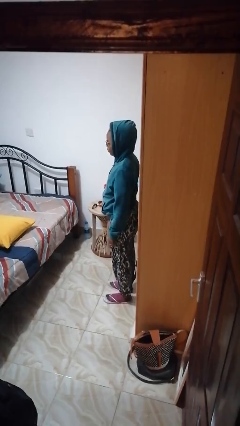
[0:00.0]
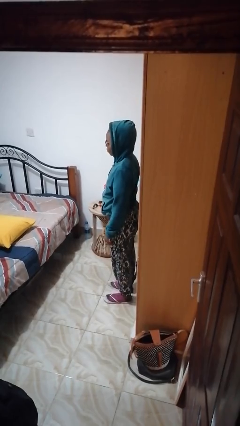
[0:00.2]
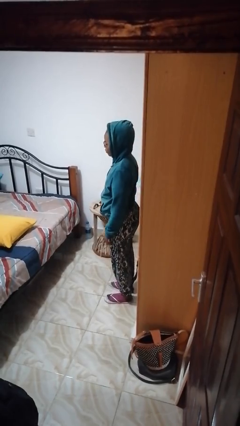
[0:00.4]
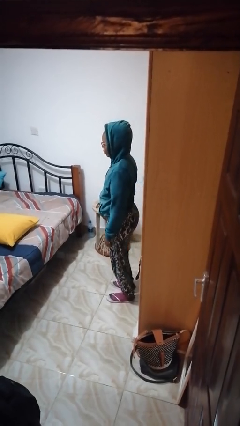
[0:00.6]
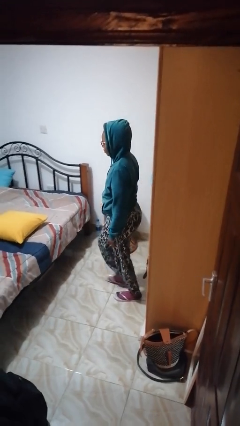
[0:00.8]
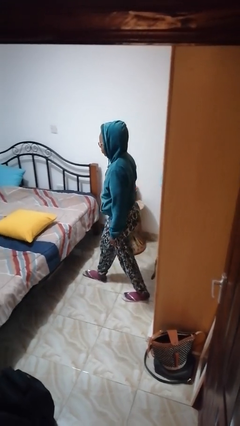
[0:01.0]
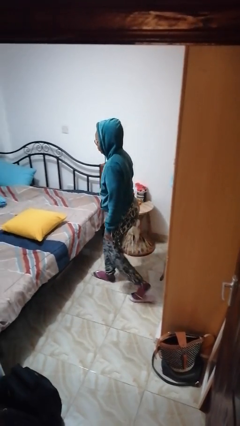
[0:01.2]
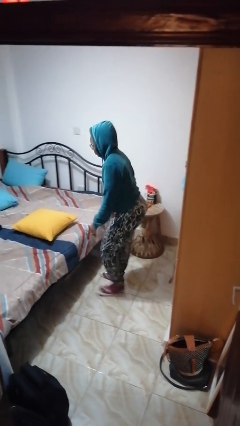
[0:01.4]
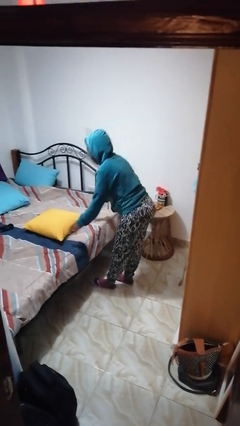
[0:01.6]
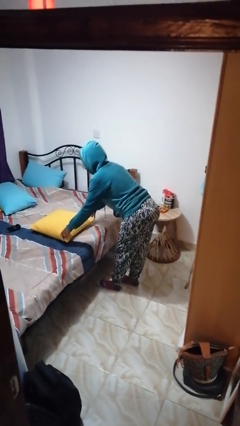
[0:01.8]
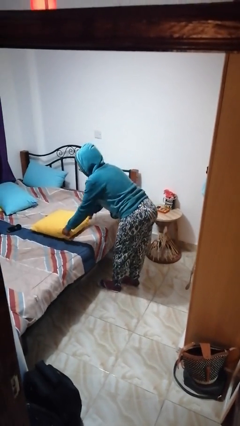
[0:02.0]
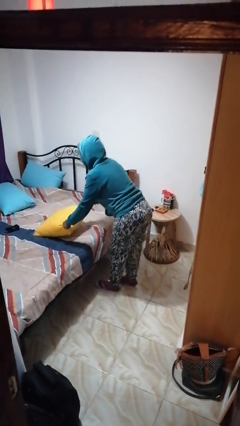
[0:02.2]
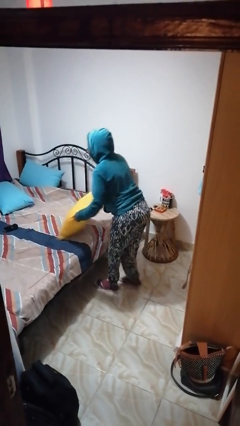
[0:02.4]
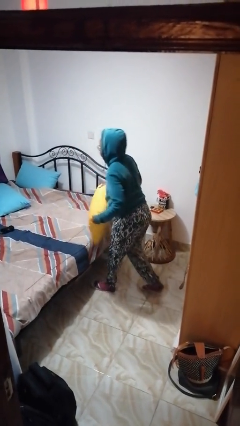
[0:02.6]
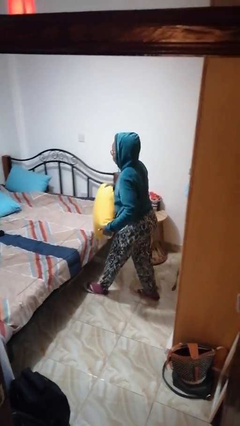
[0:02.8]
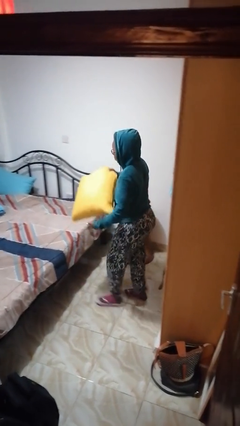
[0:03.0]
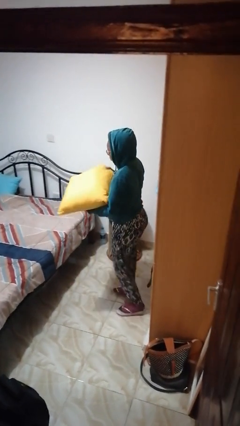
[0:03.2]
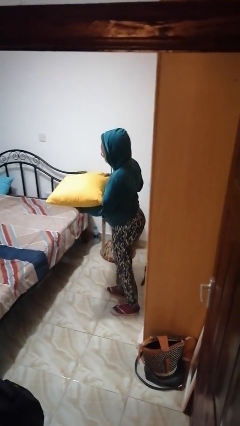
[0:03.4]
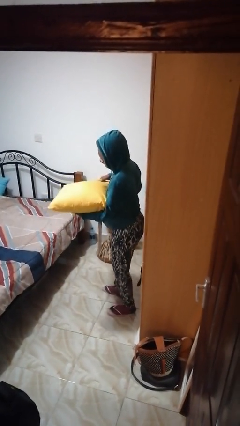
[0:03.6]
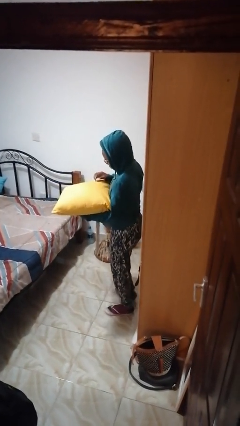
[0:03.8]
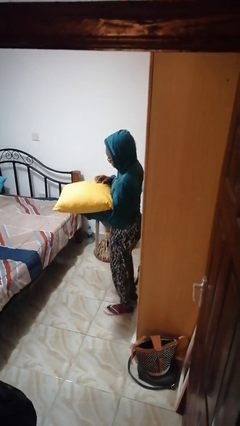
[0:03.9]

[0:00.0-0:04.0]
person picks up object from bed

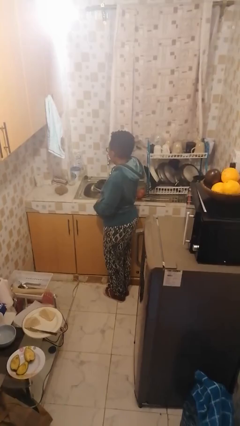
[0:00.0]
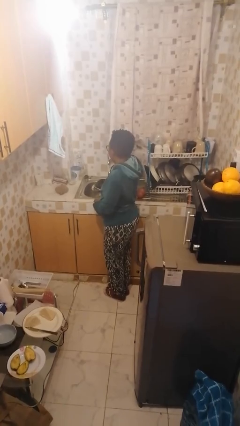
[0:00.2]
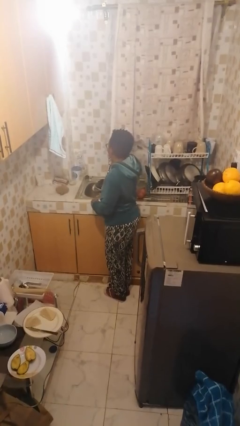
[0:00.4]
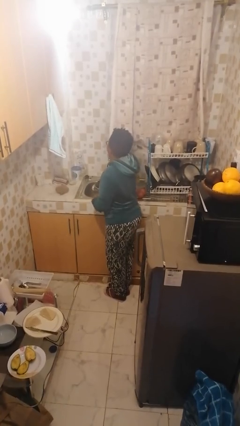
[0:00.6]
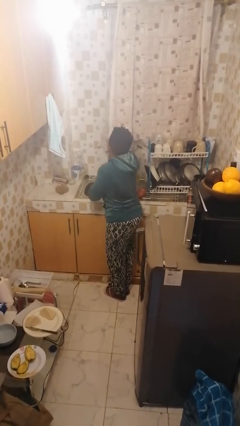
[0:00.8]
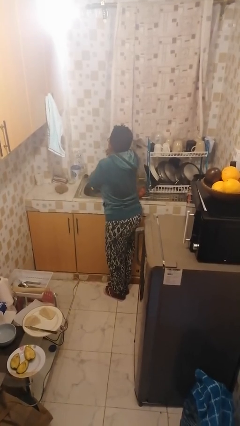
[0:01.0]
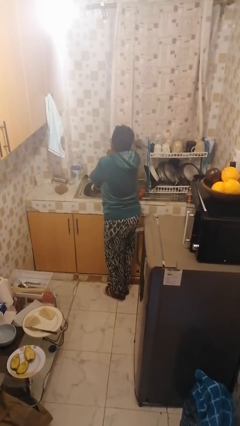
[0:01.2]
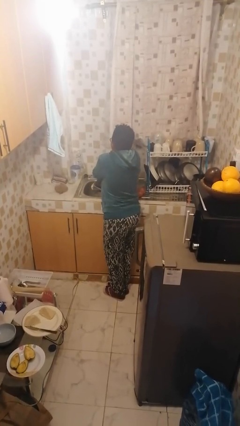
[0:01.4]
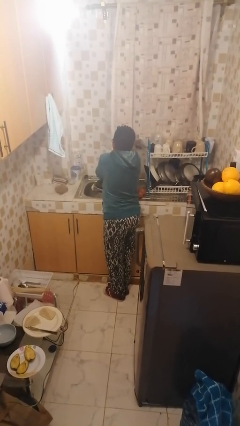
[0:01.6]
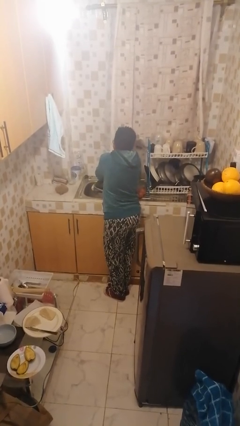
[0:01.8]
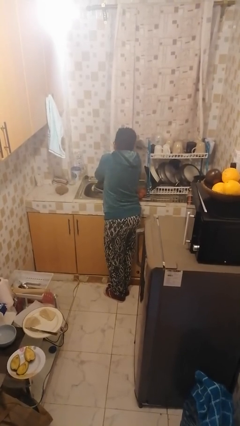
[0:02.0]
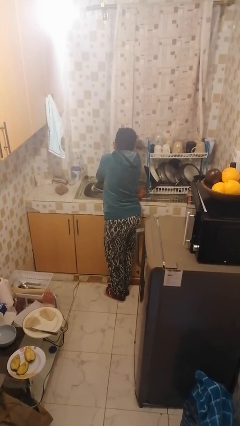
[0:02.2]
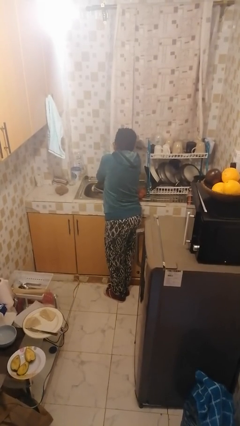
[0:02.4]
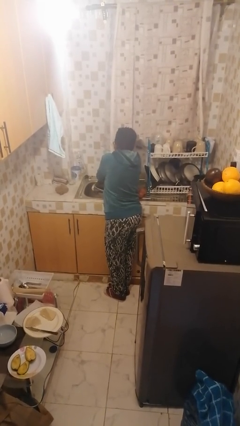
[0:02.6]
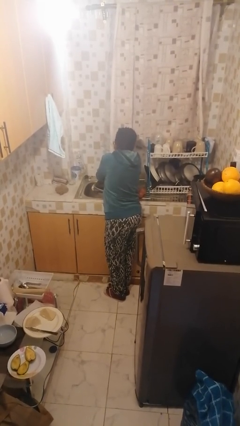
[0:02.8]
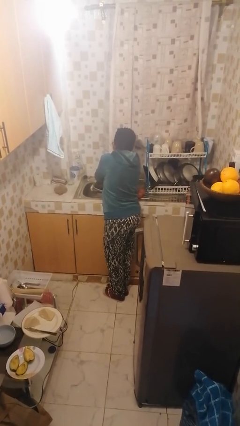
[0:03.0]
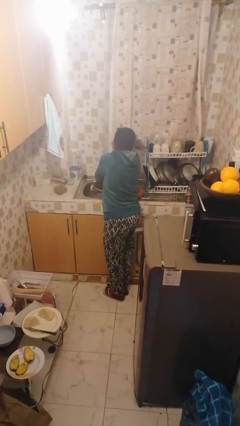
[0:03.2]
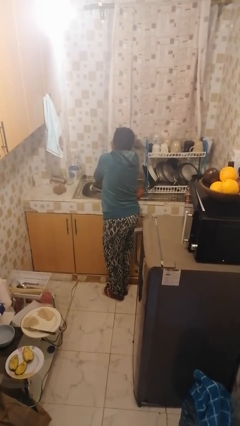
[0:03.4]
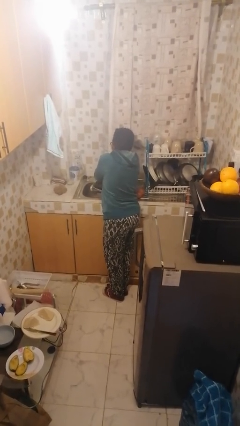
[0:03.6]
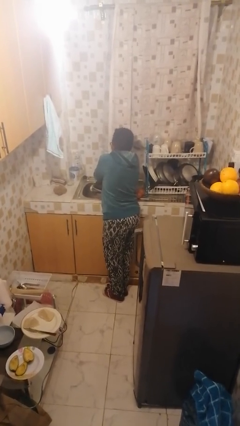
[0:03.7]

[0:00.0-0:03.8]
person washes hands

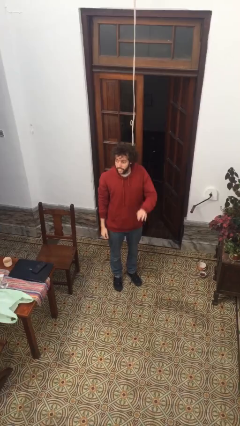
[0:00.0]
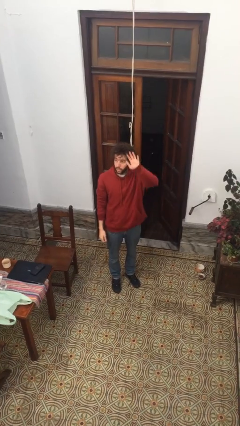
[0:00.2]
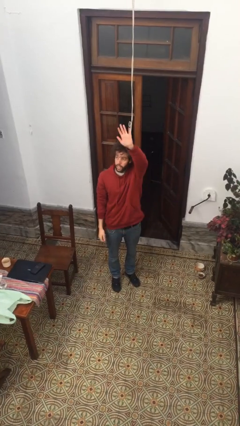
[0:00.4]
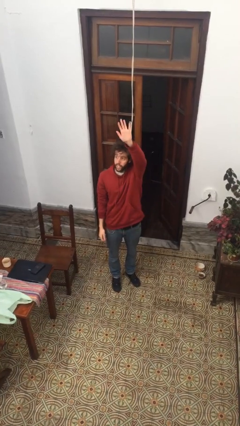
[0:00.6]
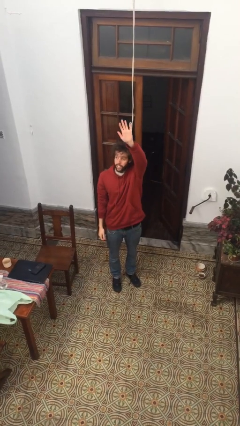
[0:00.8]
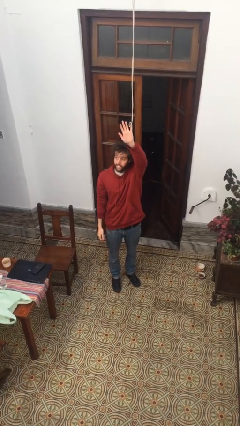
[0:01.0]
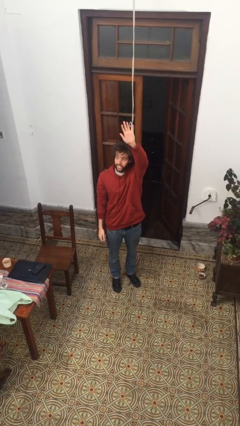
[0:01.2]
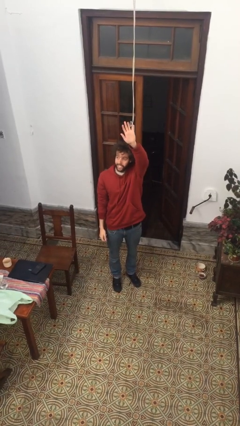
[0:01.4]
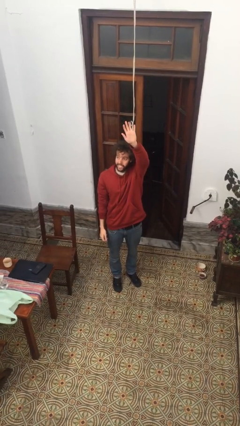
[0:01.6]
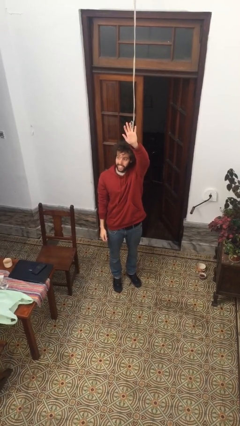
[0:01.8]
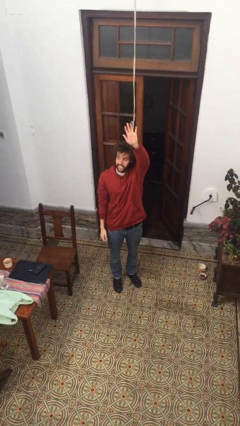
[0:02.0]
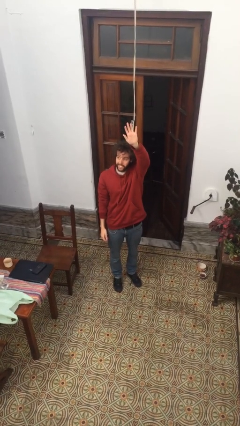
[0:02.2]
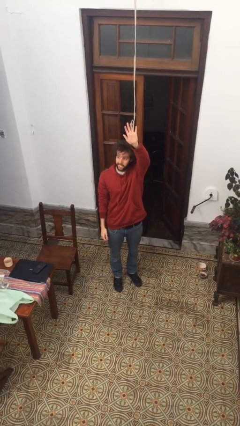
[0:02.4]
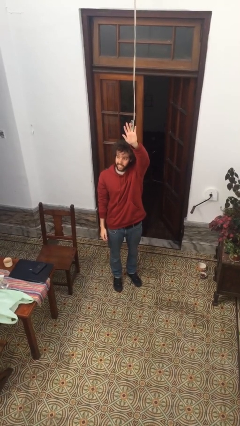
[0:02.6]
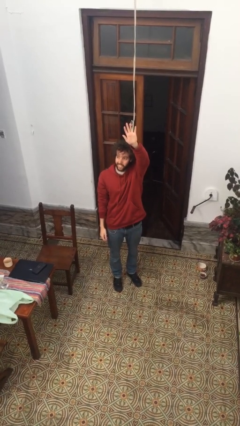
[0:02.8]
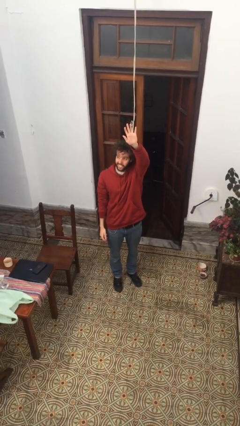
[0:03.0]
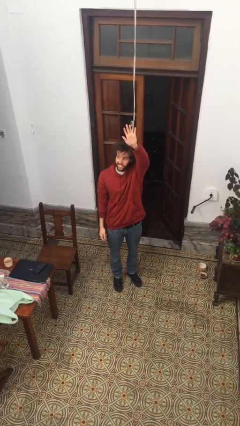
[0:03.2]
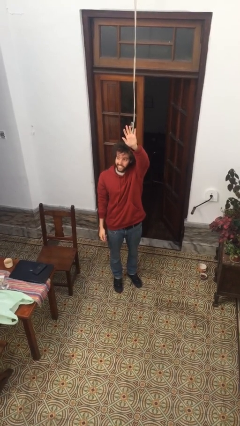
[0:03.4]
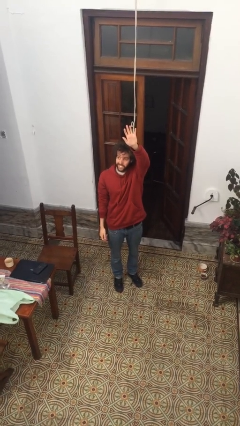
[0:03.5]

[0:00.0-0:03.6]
person gestures raise hand

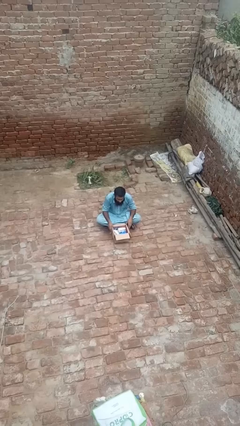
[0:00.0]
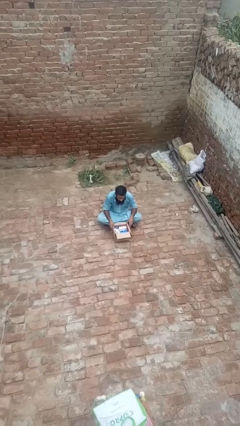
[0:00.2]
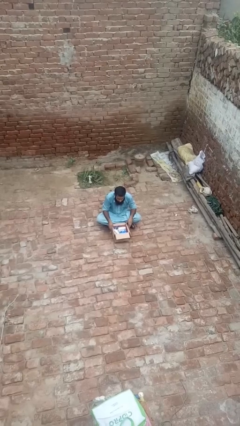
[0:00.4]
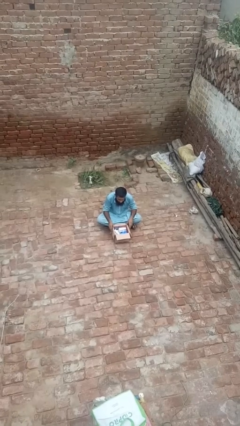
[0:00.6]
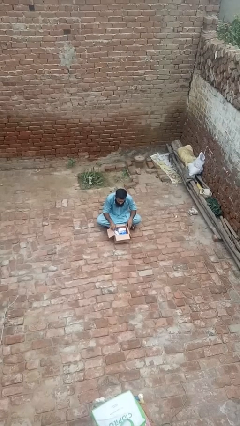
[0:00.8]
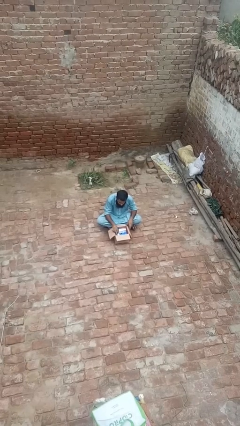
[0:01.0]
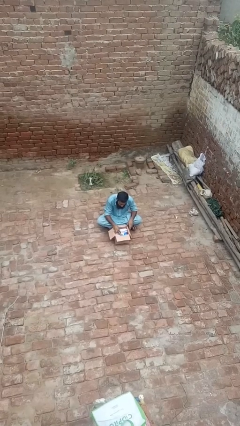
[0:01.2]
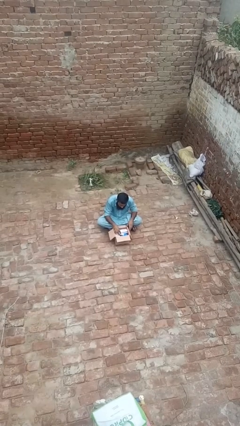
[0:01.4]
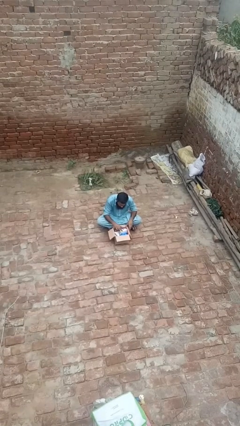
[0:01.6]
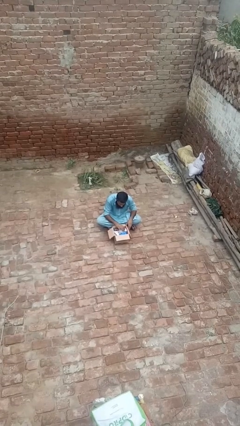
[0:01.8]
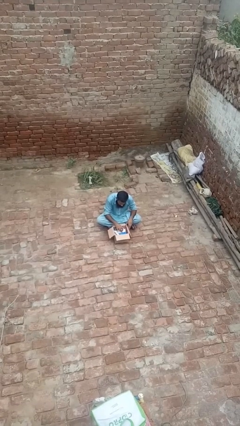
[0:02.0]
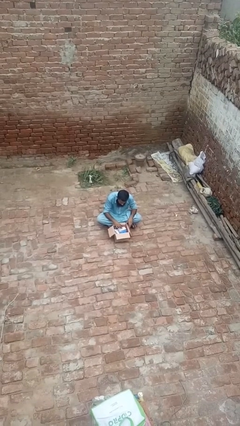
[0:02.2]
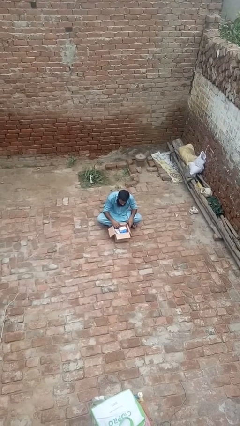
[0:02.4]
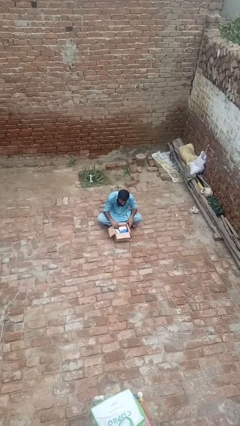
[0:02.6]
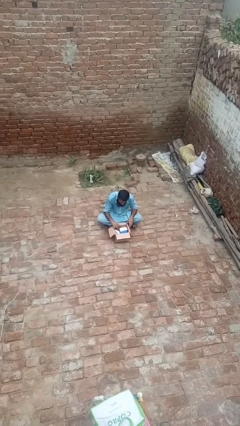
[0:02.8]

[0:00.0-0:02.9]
person searches in box

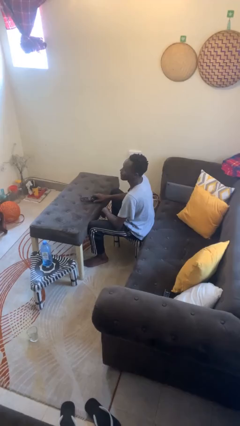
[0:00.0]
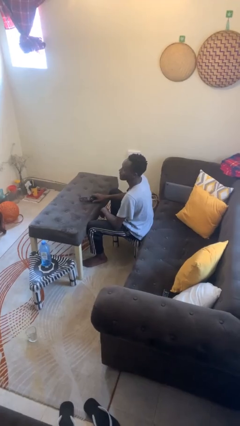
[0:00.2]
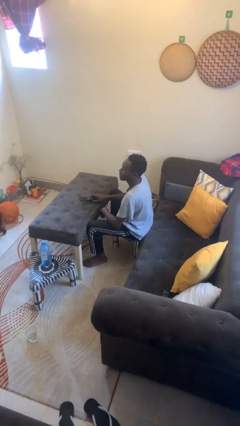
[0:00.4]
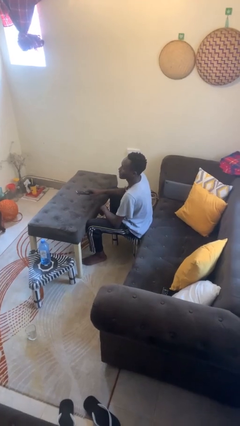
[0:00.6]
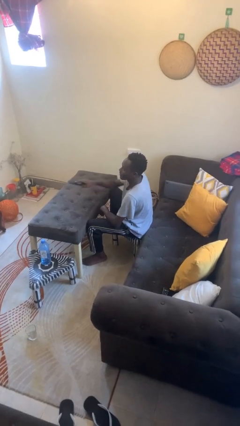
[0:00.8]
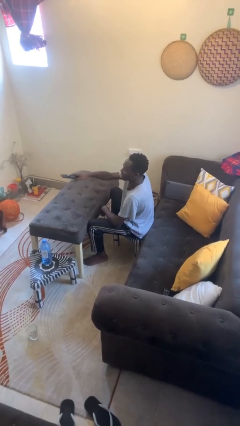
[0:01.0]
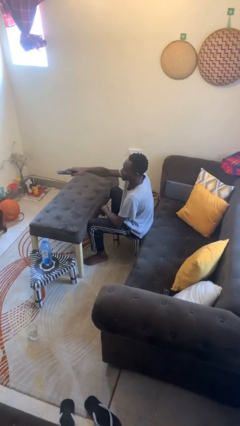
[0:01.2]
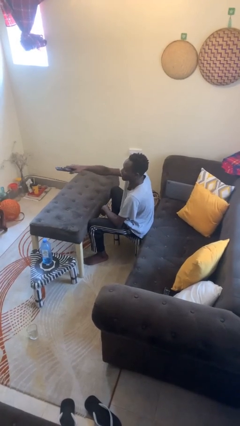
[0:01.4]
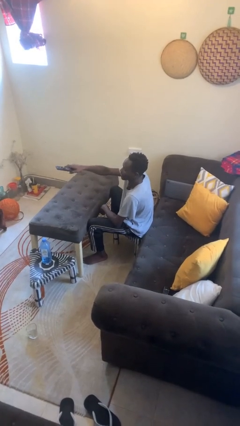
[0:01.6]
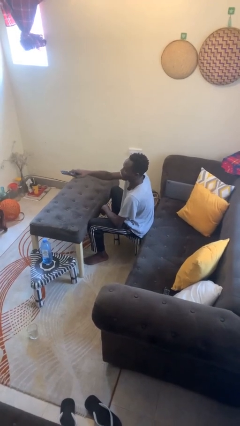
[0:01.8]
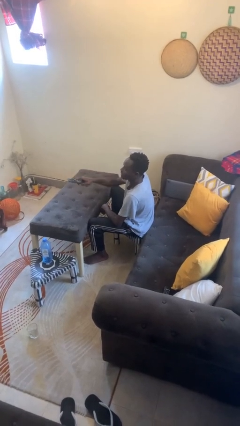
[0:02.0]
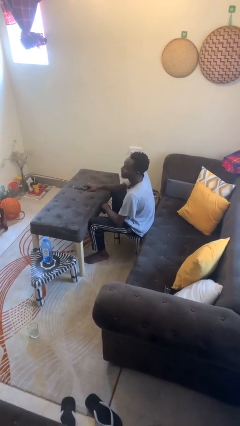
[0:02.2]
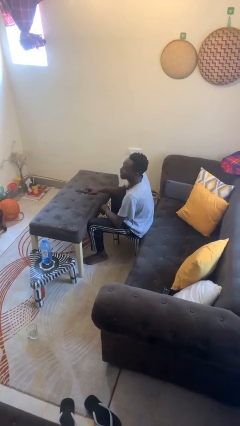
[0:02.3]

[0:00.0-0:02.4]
person uses television remote

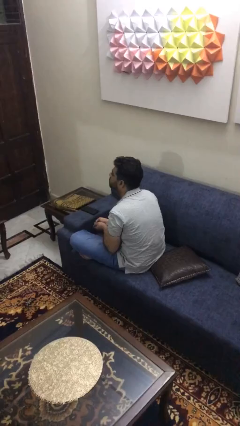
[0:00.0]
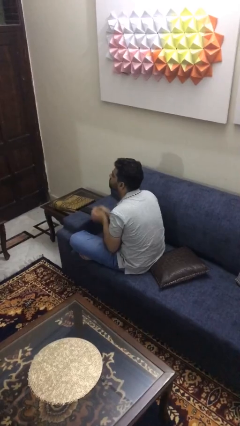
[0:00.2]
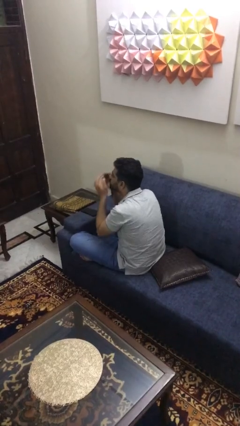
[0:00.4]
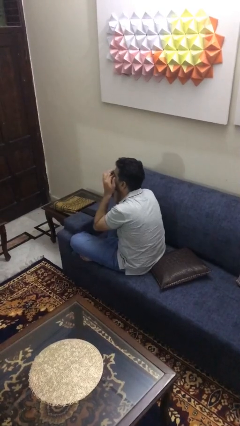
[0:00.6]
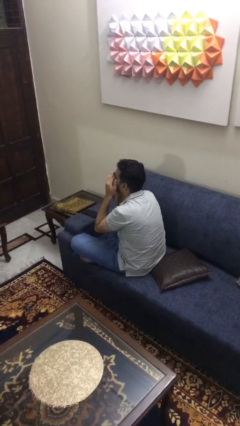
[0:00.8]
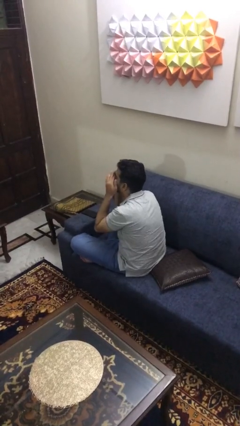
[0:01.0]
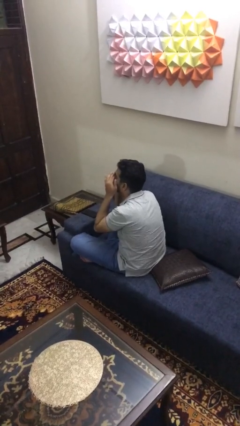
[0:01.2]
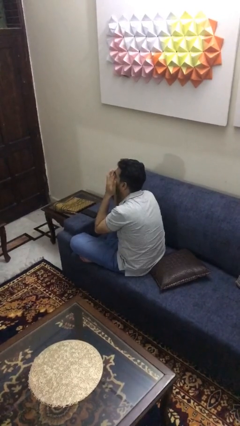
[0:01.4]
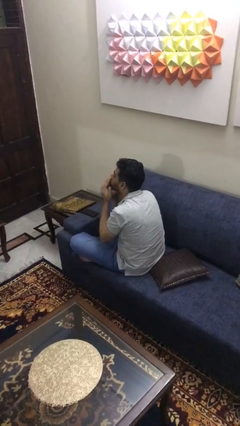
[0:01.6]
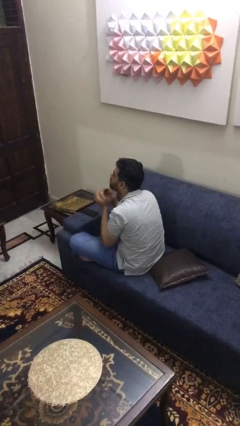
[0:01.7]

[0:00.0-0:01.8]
person rubs eyes
